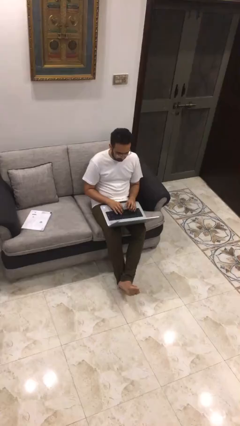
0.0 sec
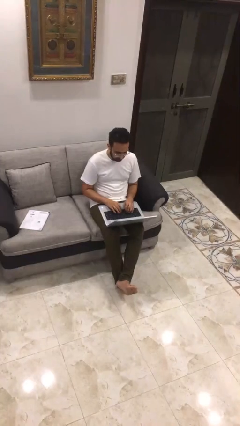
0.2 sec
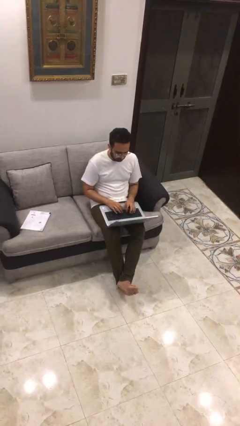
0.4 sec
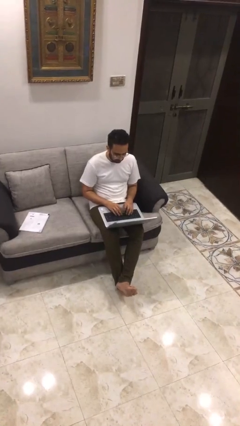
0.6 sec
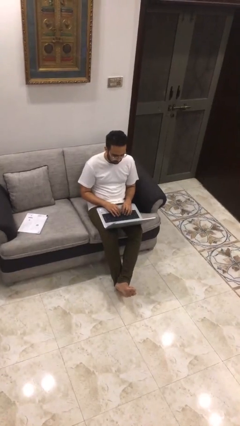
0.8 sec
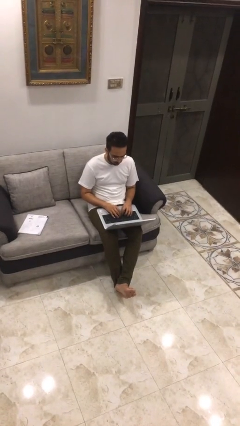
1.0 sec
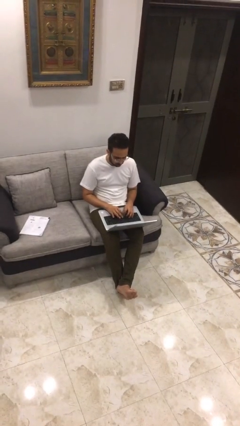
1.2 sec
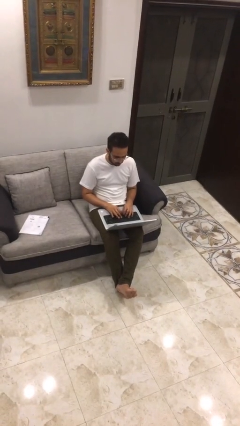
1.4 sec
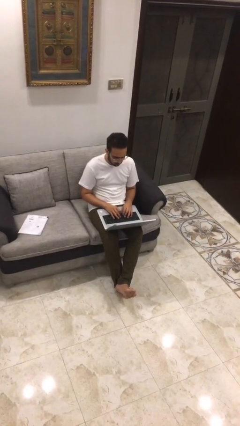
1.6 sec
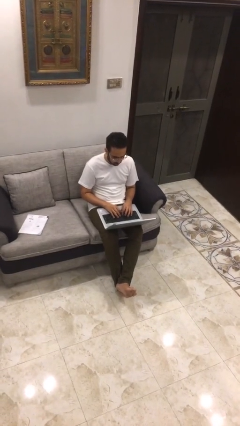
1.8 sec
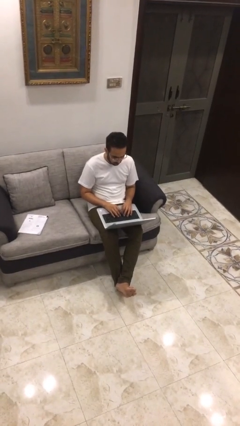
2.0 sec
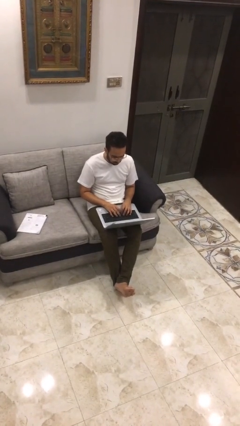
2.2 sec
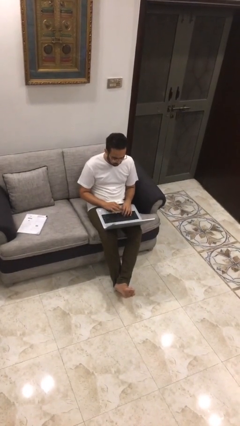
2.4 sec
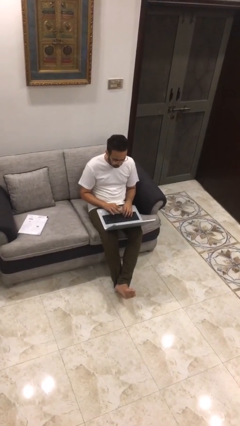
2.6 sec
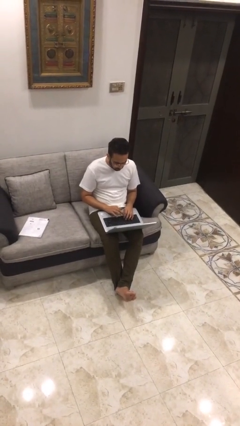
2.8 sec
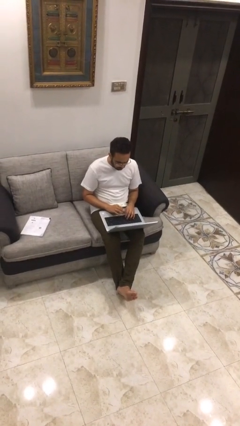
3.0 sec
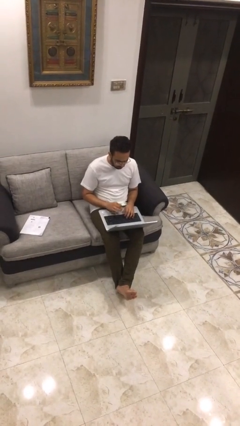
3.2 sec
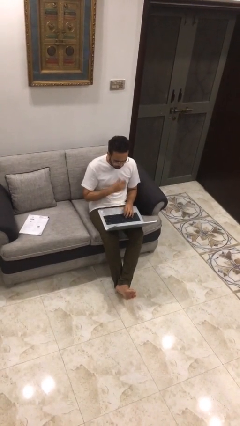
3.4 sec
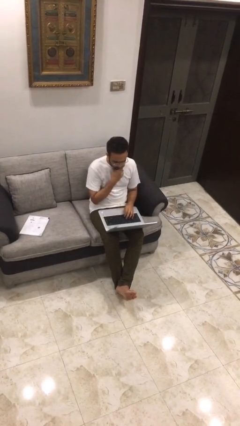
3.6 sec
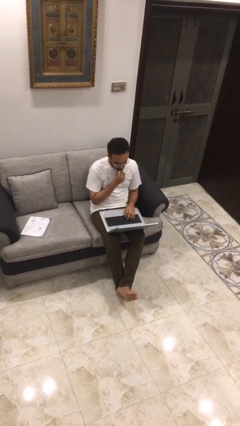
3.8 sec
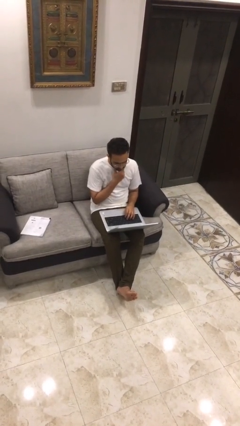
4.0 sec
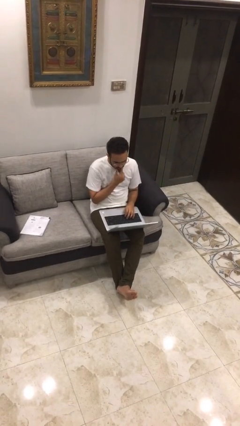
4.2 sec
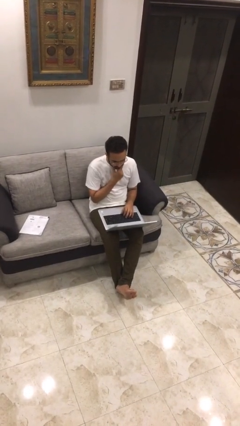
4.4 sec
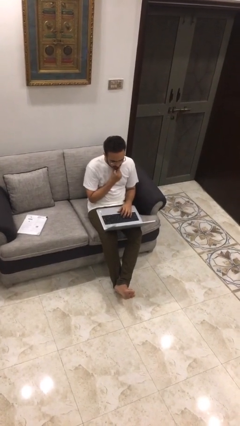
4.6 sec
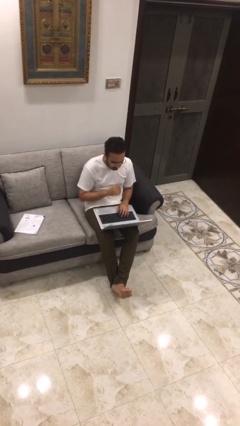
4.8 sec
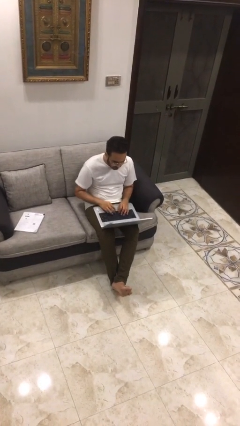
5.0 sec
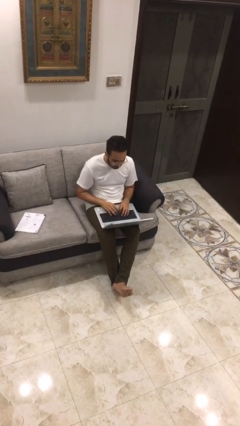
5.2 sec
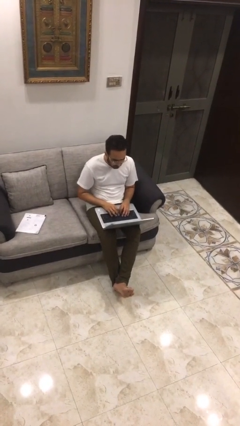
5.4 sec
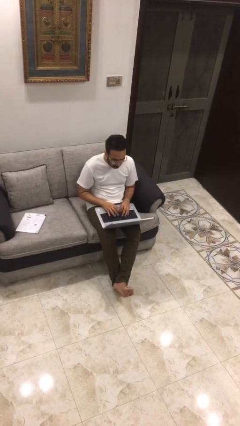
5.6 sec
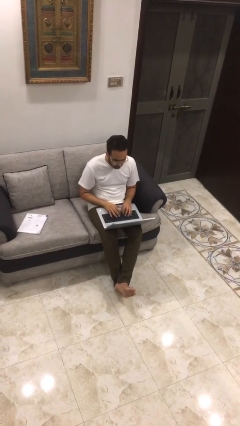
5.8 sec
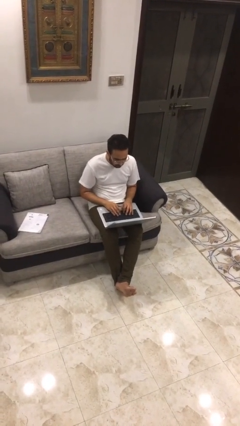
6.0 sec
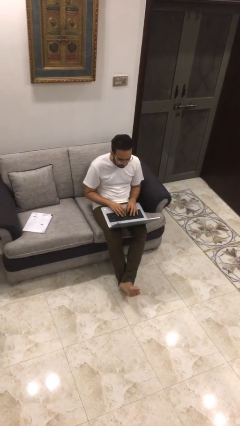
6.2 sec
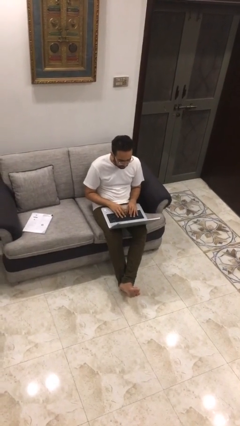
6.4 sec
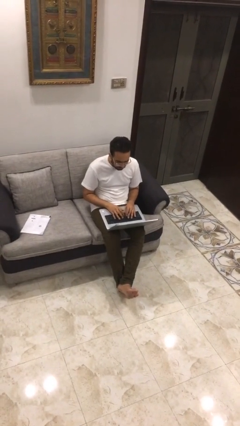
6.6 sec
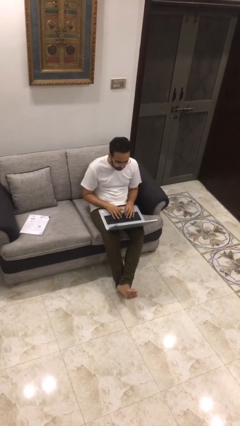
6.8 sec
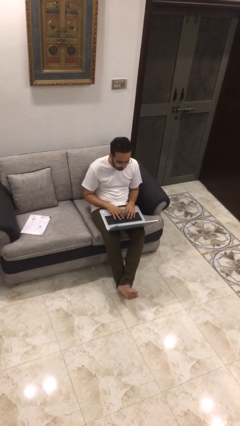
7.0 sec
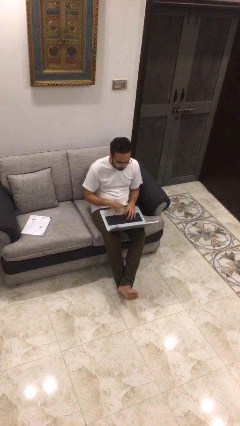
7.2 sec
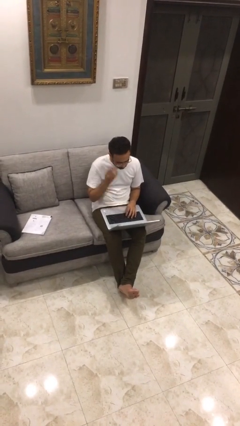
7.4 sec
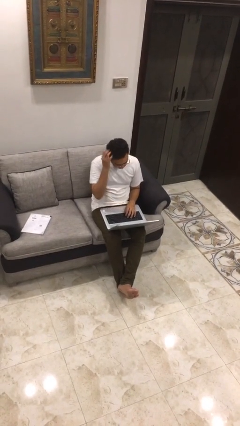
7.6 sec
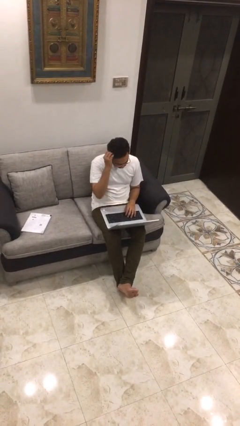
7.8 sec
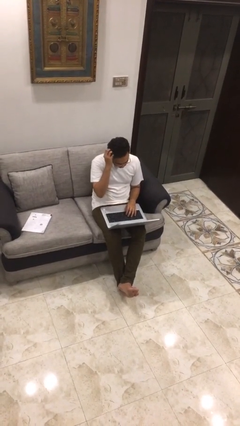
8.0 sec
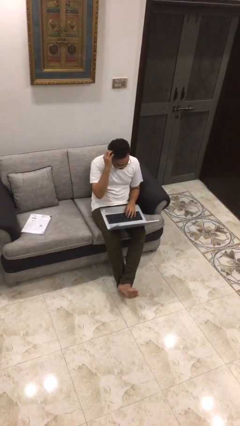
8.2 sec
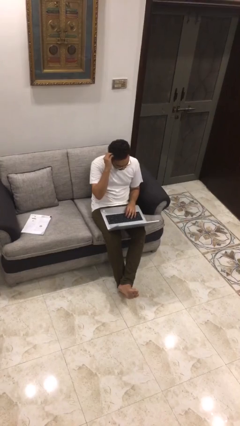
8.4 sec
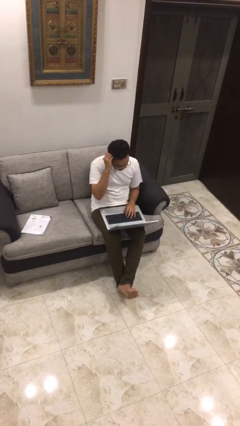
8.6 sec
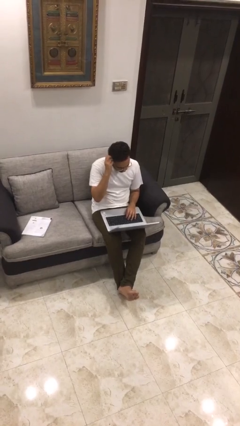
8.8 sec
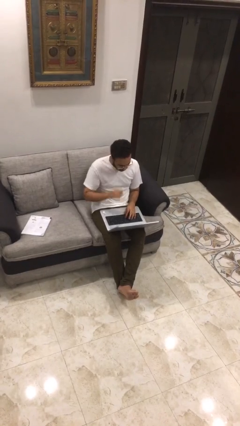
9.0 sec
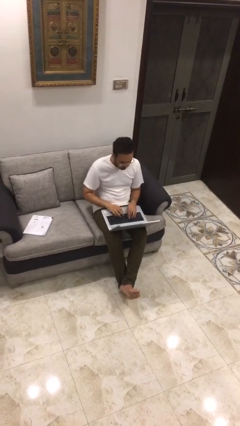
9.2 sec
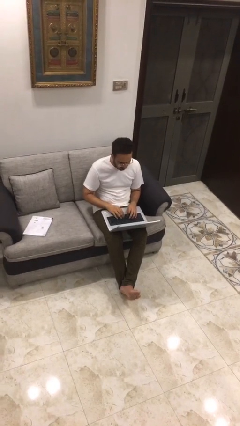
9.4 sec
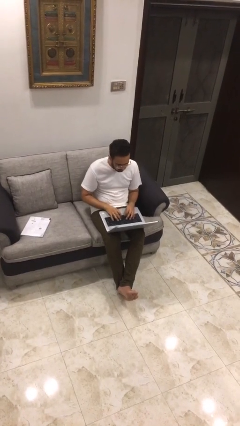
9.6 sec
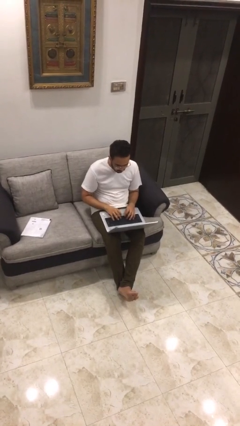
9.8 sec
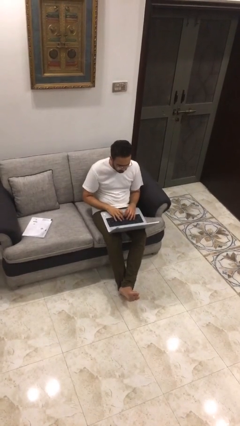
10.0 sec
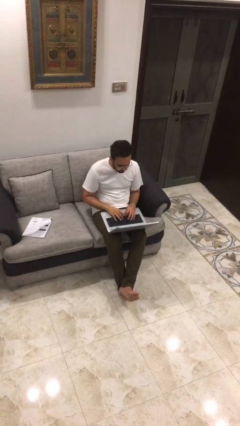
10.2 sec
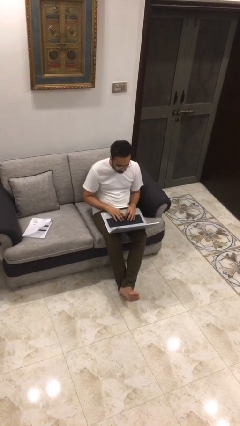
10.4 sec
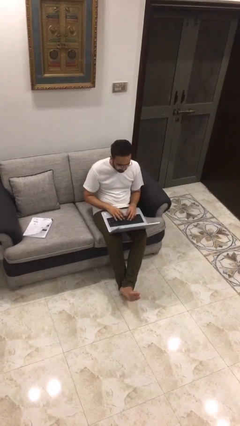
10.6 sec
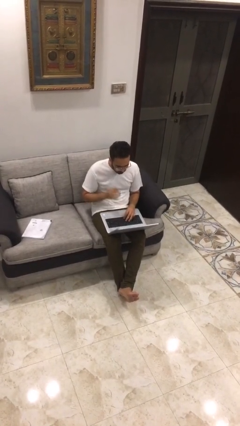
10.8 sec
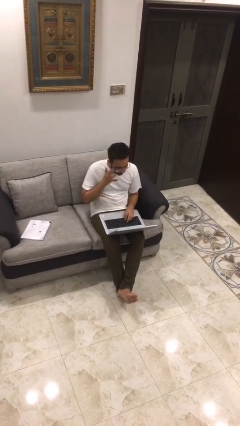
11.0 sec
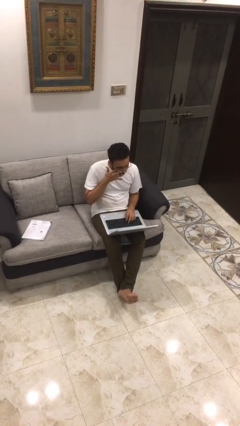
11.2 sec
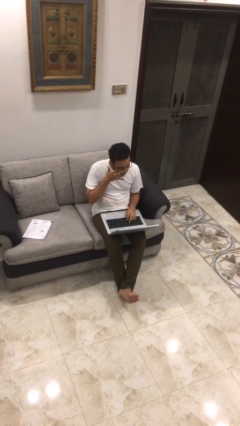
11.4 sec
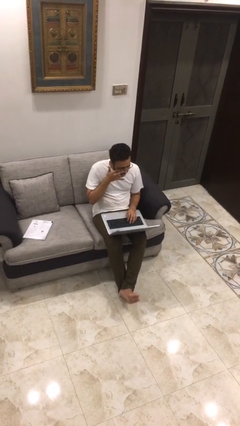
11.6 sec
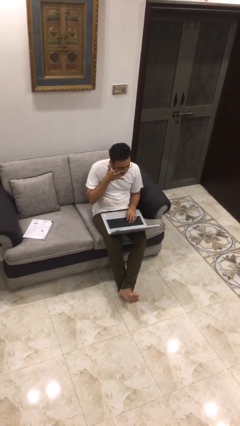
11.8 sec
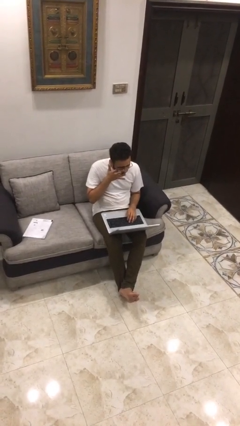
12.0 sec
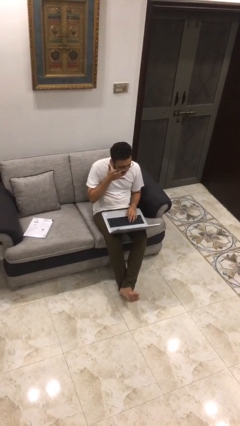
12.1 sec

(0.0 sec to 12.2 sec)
person interacts with laptop

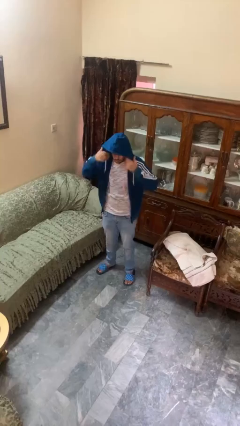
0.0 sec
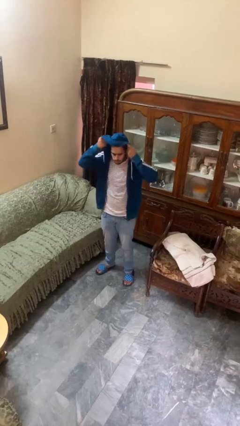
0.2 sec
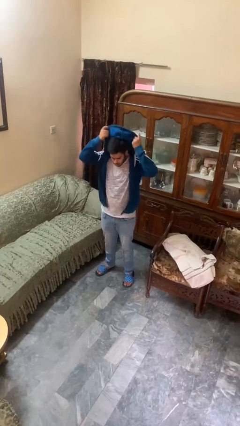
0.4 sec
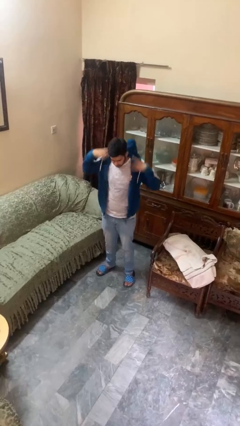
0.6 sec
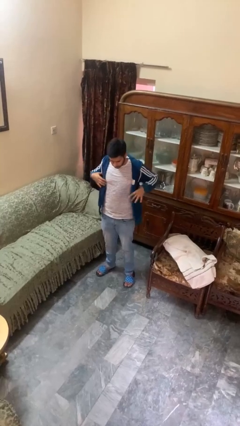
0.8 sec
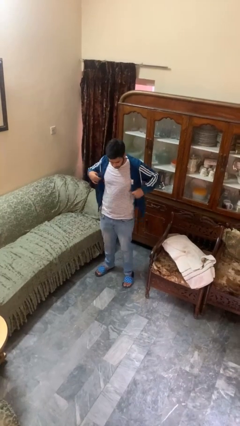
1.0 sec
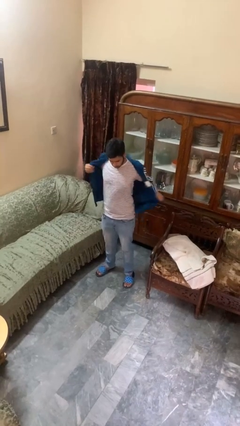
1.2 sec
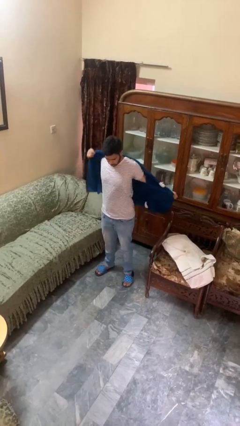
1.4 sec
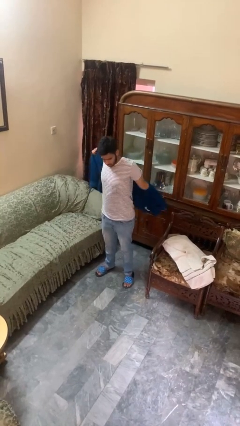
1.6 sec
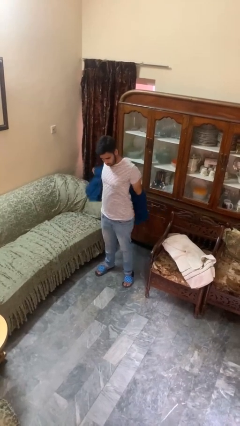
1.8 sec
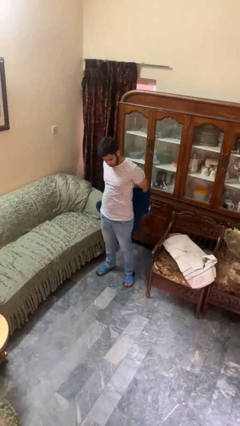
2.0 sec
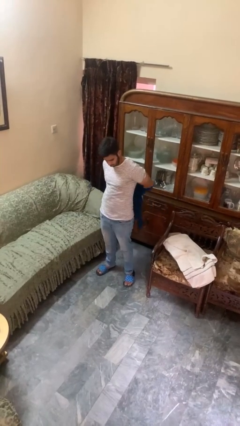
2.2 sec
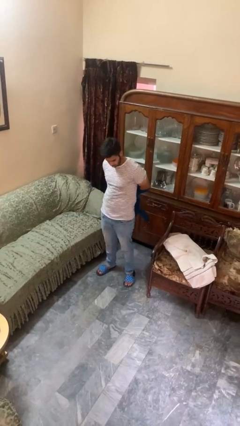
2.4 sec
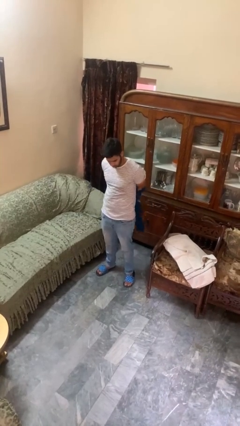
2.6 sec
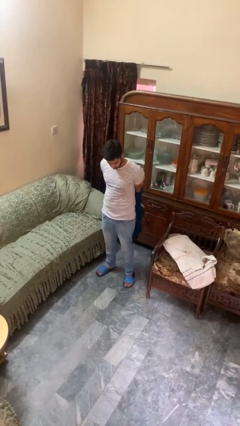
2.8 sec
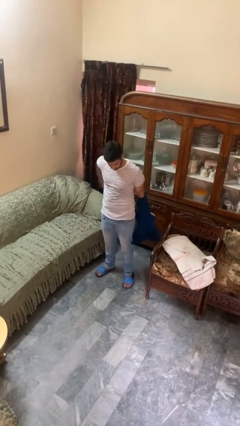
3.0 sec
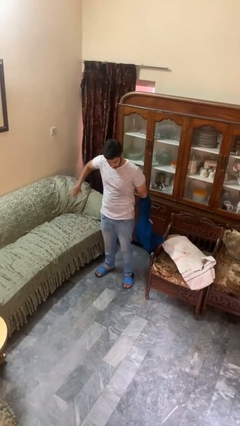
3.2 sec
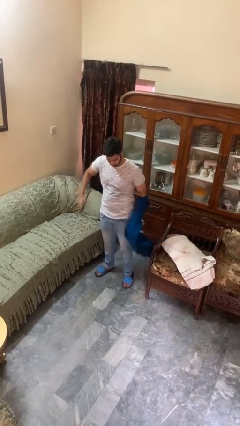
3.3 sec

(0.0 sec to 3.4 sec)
person takes off hoodie

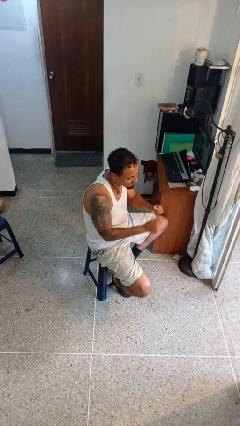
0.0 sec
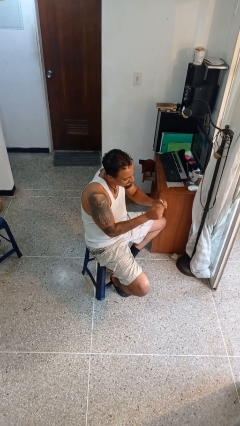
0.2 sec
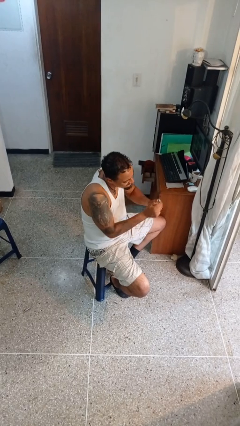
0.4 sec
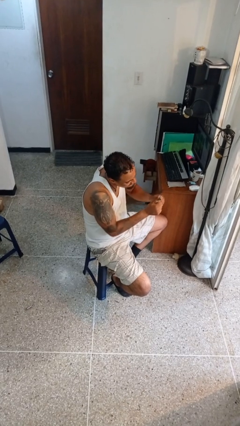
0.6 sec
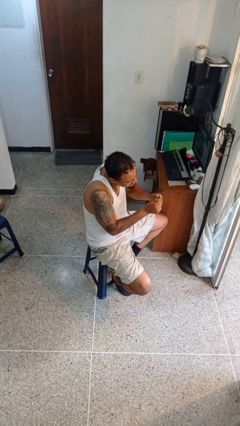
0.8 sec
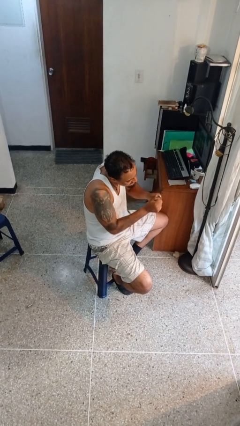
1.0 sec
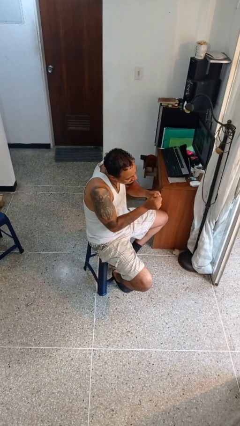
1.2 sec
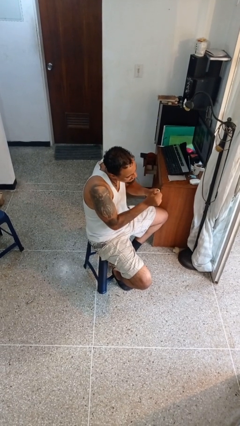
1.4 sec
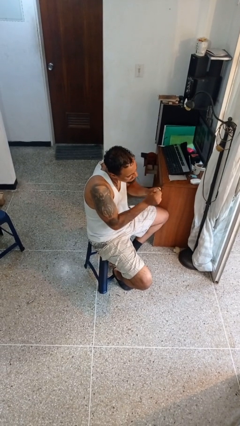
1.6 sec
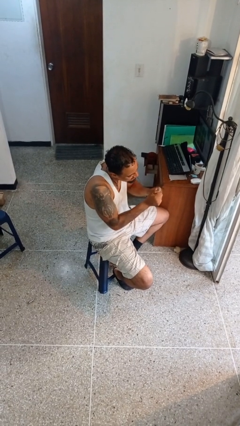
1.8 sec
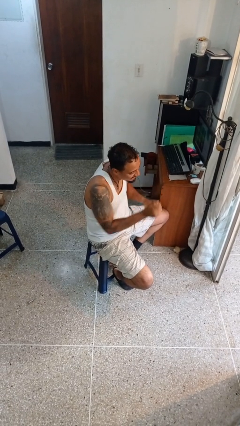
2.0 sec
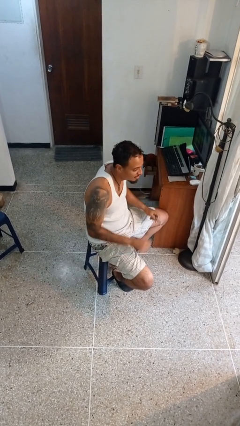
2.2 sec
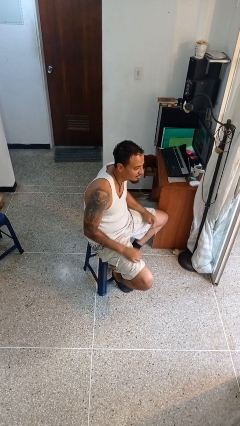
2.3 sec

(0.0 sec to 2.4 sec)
person files fingernails
